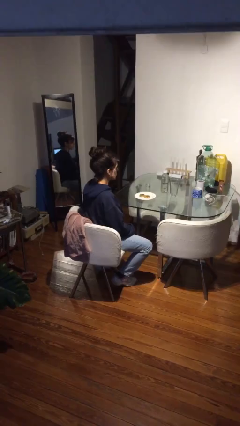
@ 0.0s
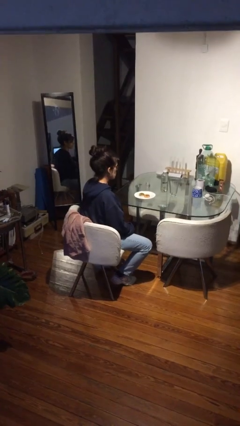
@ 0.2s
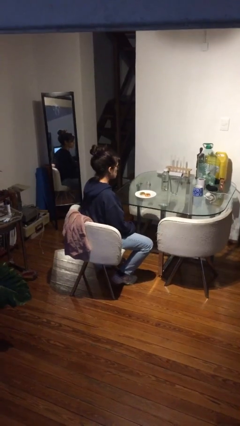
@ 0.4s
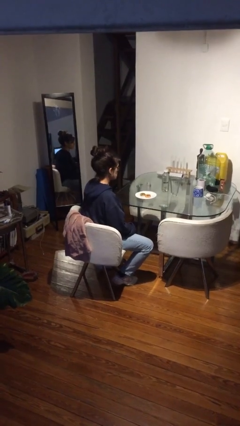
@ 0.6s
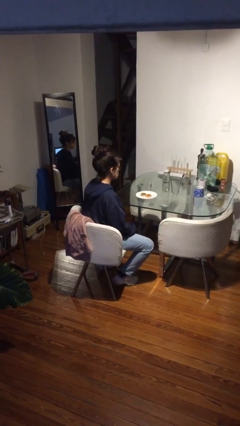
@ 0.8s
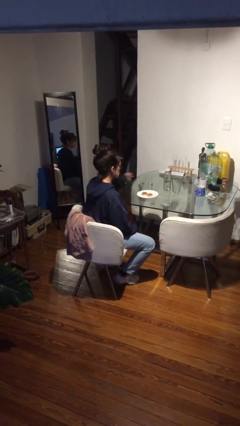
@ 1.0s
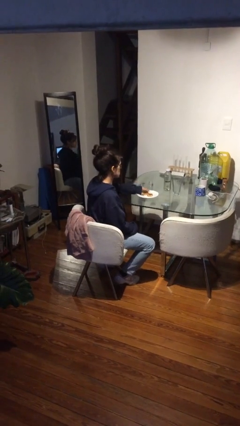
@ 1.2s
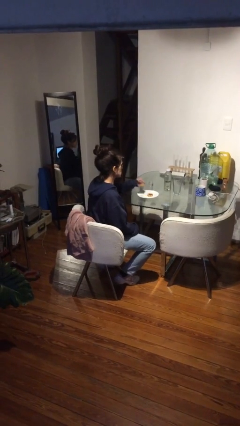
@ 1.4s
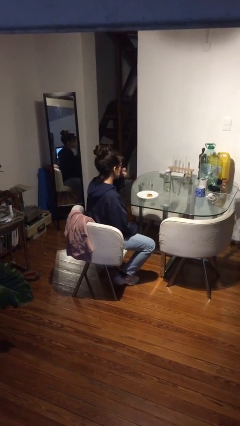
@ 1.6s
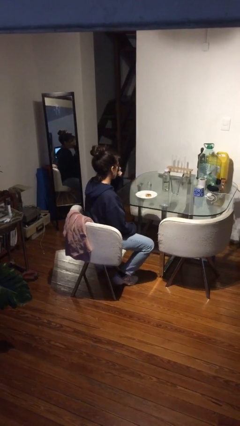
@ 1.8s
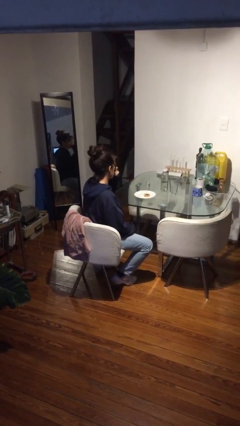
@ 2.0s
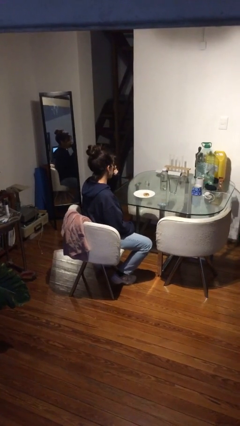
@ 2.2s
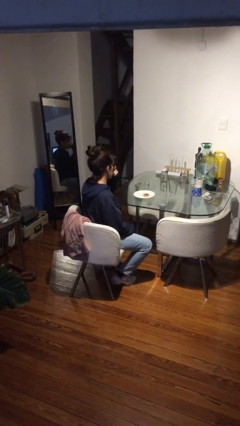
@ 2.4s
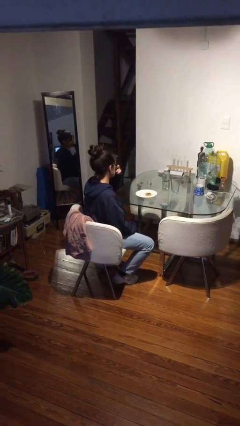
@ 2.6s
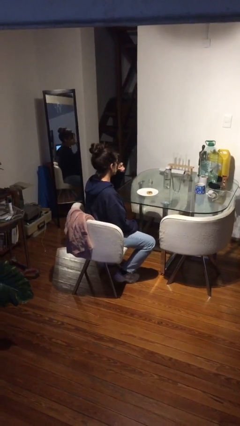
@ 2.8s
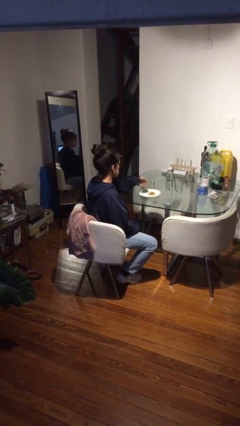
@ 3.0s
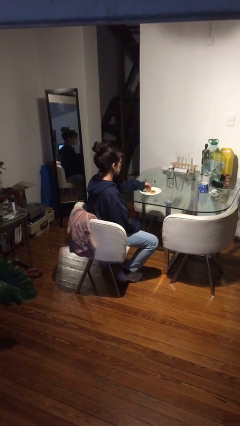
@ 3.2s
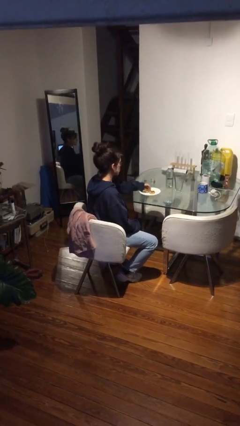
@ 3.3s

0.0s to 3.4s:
person eats with hands

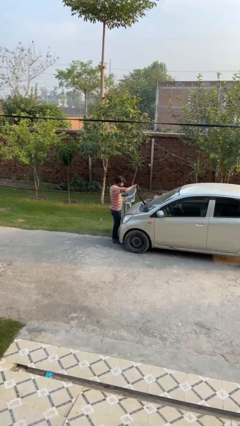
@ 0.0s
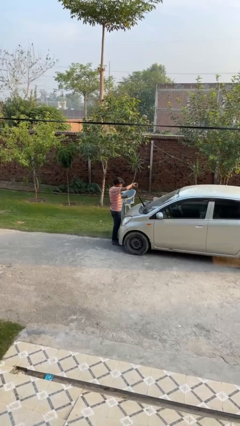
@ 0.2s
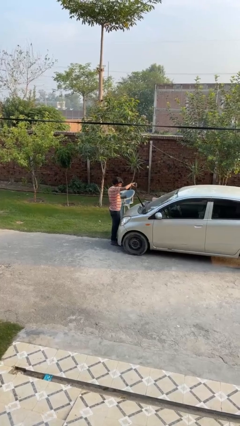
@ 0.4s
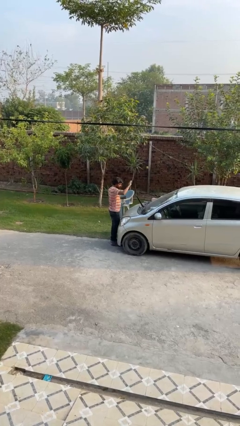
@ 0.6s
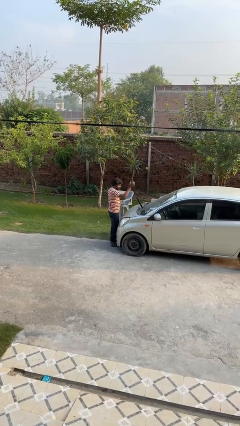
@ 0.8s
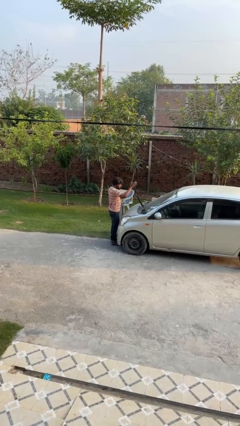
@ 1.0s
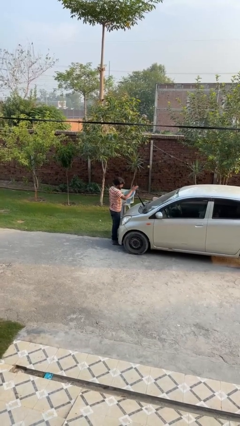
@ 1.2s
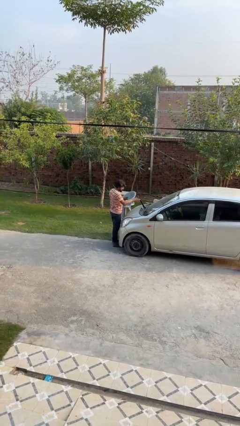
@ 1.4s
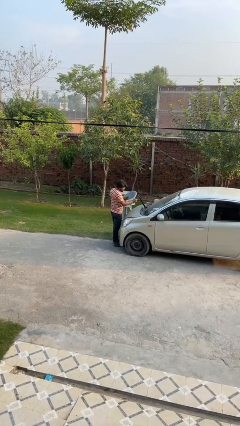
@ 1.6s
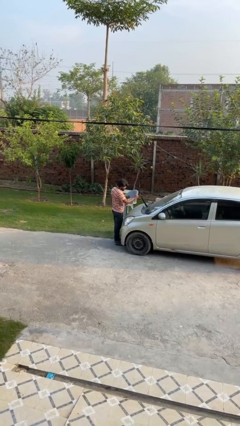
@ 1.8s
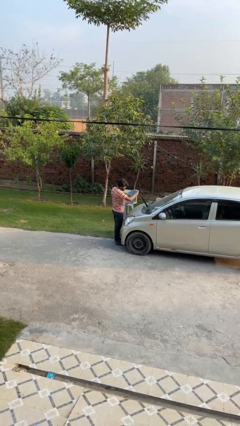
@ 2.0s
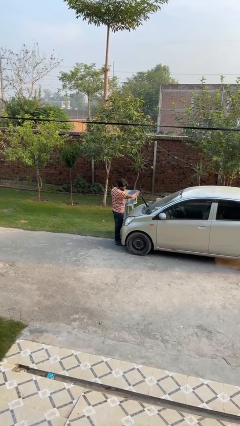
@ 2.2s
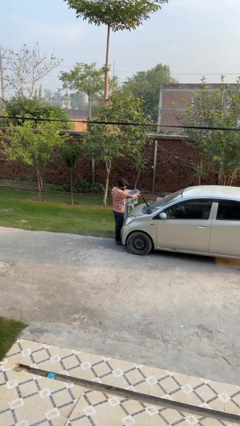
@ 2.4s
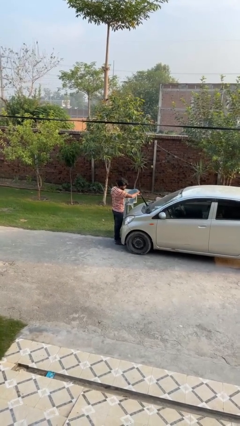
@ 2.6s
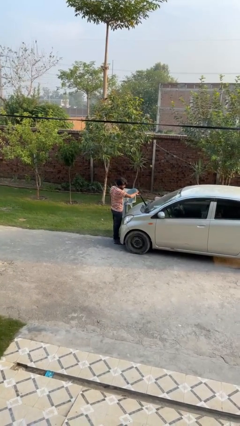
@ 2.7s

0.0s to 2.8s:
person flips up car wipers

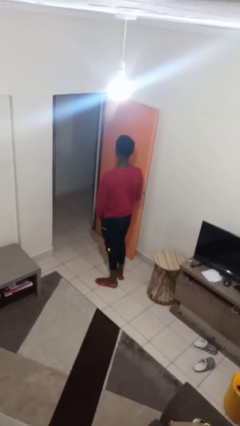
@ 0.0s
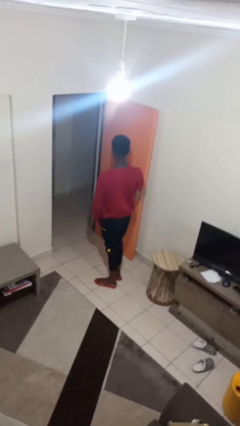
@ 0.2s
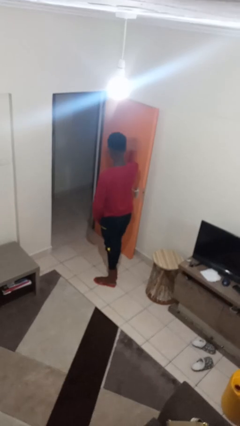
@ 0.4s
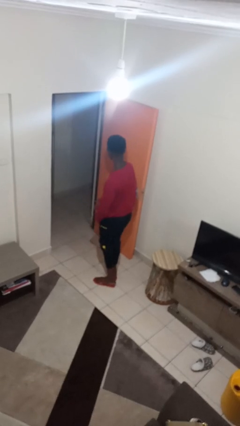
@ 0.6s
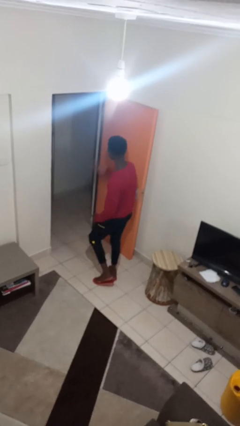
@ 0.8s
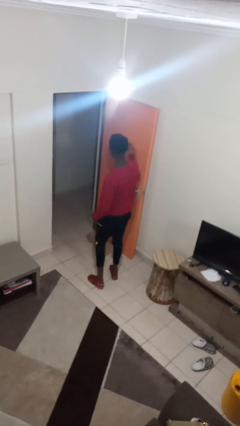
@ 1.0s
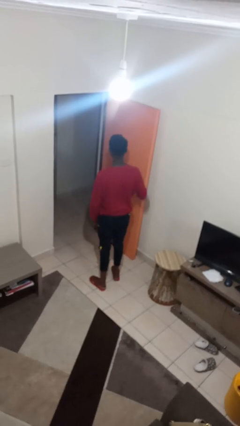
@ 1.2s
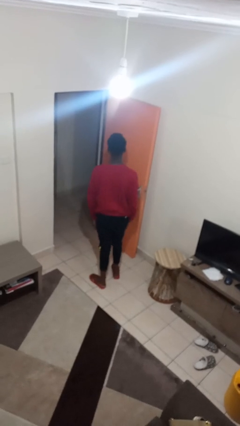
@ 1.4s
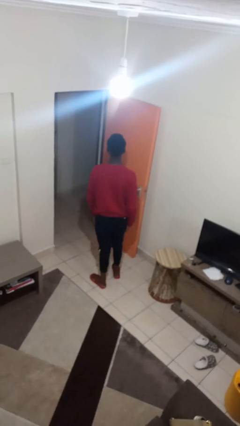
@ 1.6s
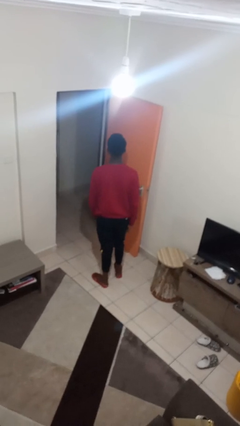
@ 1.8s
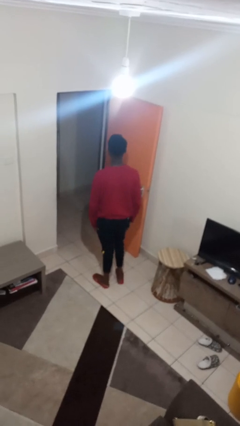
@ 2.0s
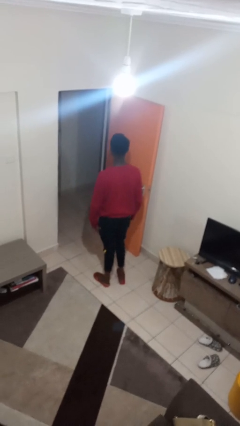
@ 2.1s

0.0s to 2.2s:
person karate chop

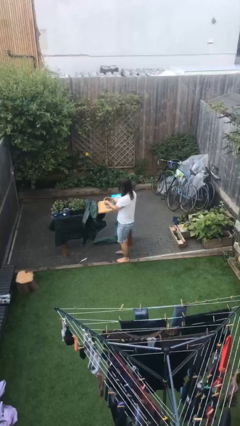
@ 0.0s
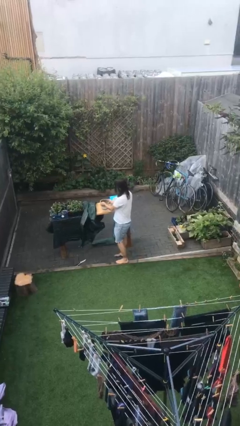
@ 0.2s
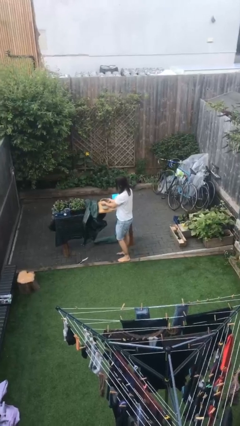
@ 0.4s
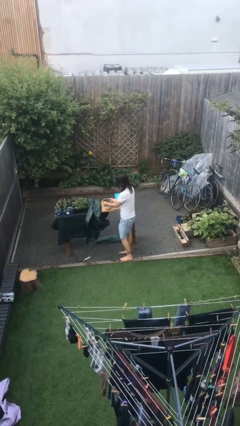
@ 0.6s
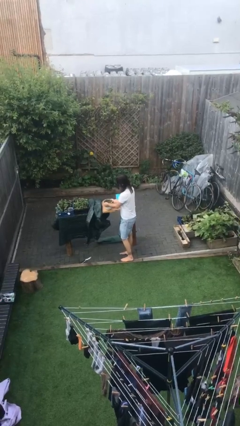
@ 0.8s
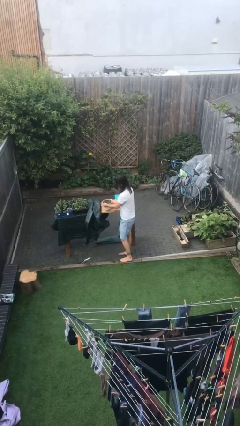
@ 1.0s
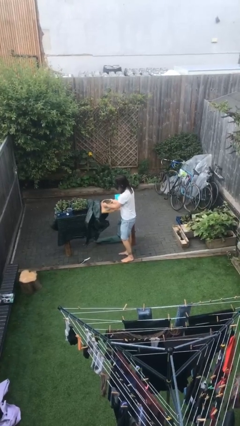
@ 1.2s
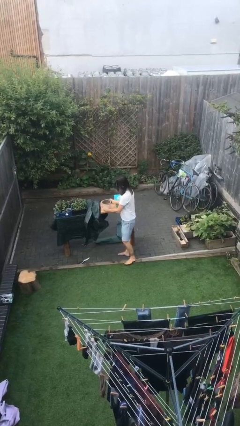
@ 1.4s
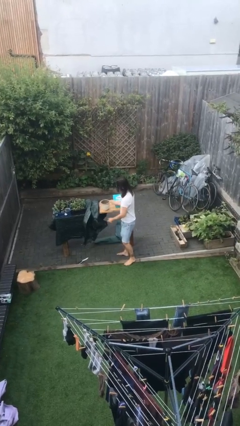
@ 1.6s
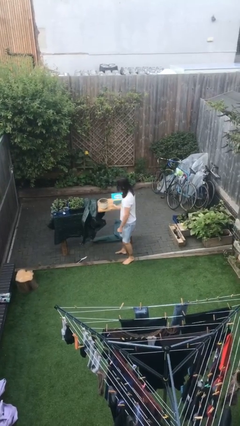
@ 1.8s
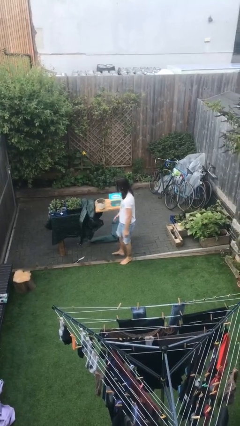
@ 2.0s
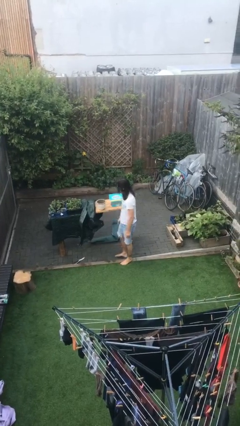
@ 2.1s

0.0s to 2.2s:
person puts down object on table

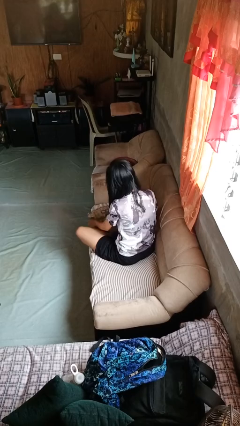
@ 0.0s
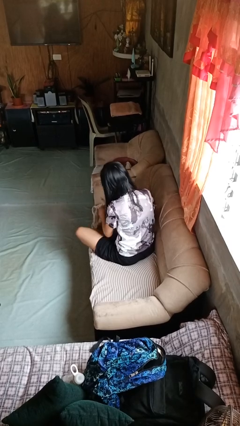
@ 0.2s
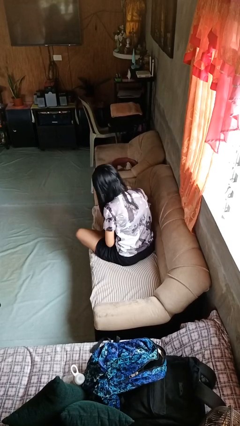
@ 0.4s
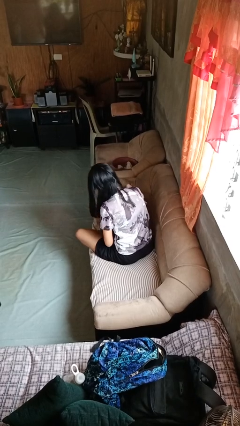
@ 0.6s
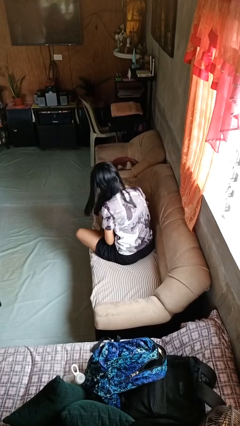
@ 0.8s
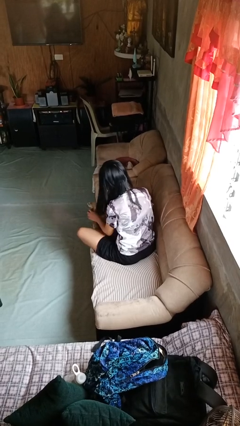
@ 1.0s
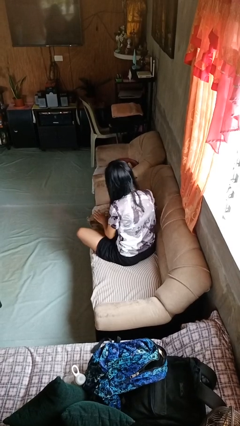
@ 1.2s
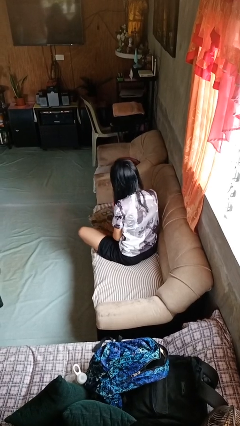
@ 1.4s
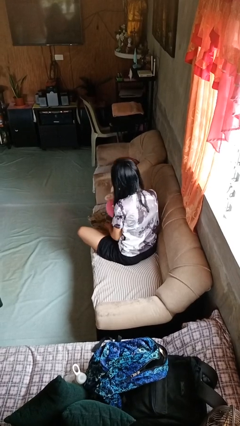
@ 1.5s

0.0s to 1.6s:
person searches in couch

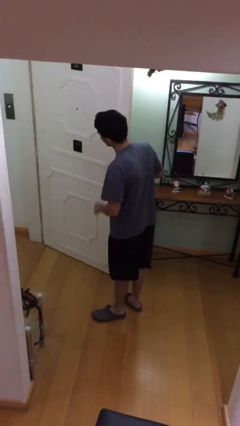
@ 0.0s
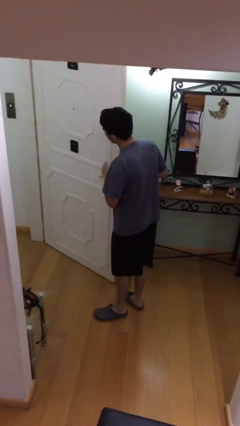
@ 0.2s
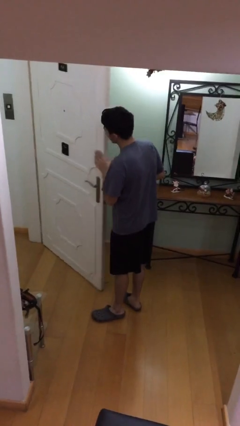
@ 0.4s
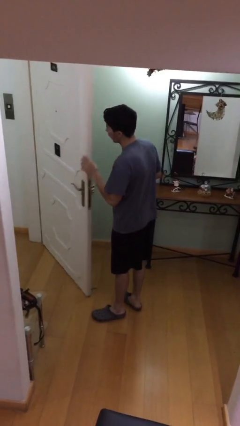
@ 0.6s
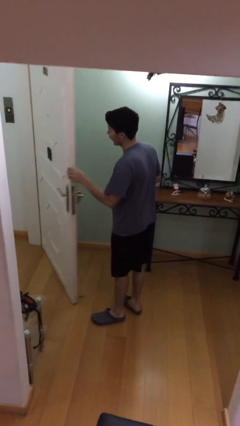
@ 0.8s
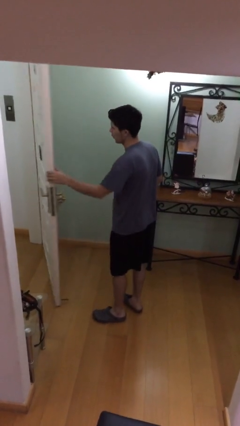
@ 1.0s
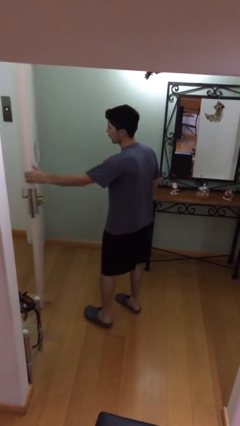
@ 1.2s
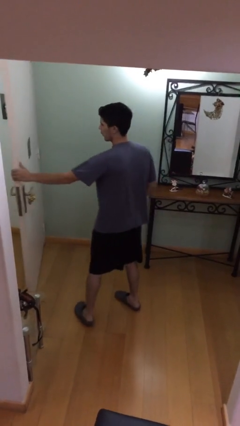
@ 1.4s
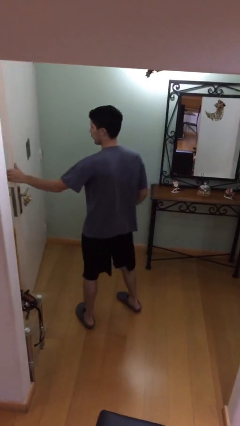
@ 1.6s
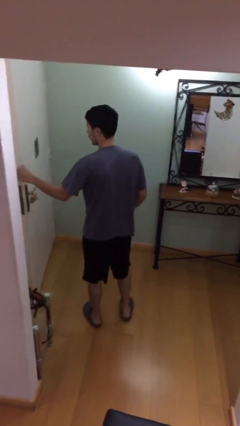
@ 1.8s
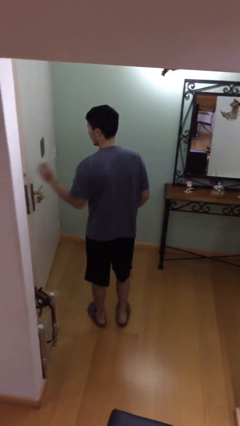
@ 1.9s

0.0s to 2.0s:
person closes facility door

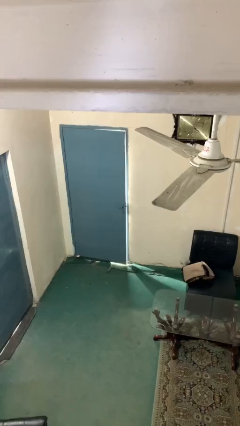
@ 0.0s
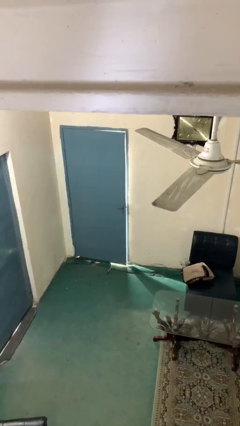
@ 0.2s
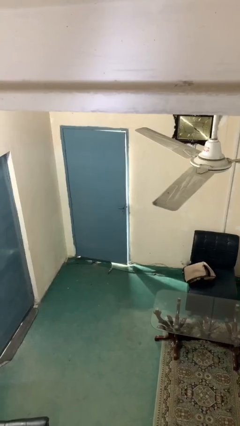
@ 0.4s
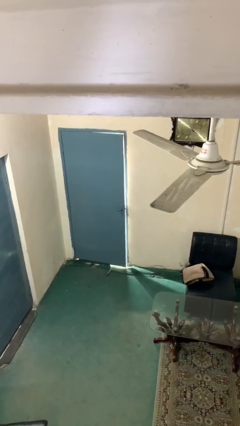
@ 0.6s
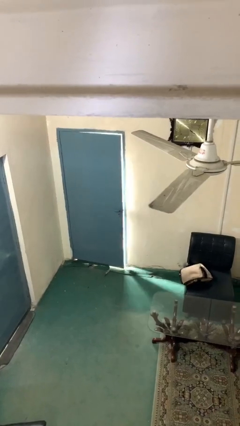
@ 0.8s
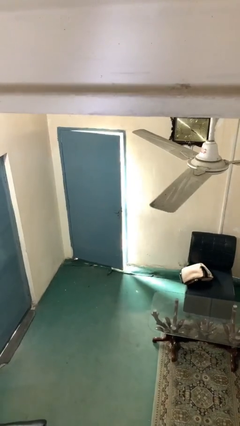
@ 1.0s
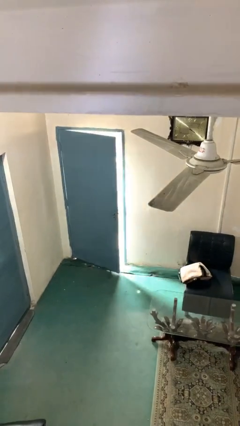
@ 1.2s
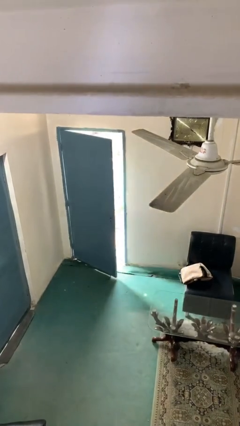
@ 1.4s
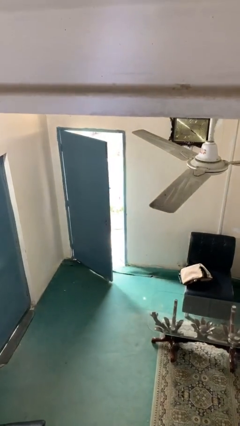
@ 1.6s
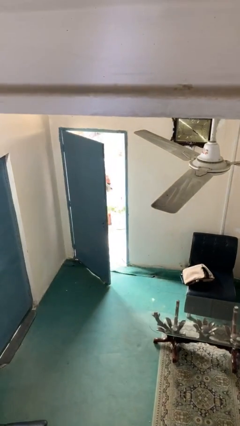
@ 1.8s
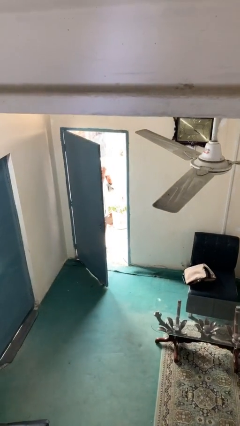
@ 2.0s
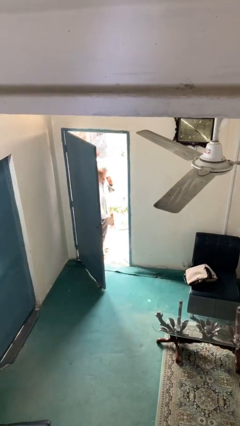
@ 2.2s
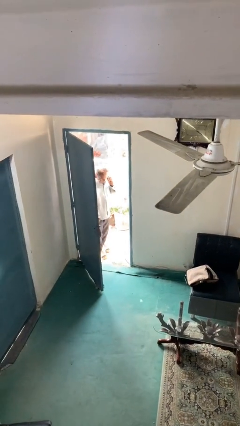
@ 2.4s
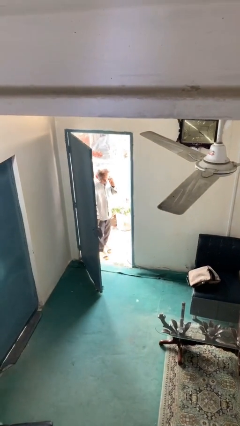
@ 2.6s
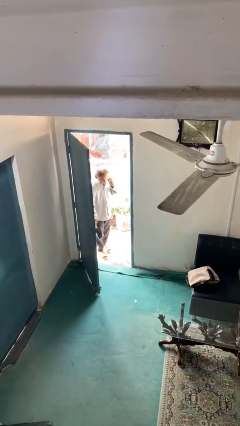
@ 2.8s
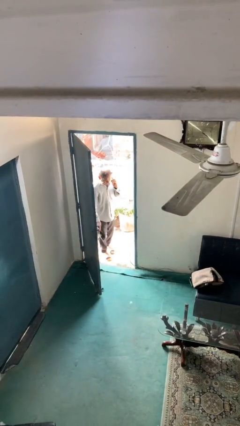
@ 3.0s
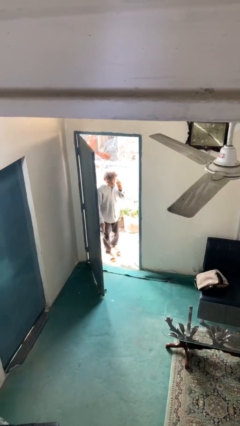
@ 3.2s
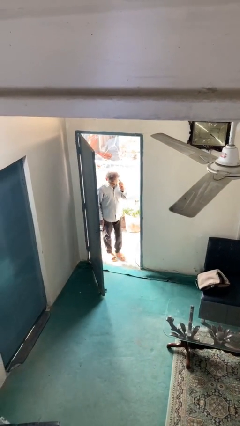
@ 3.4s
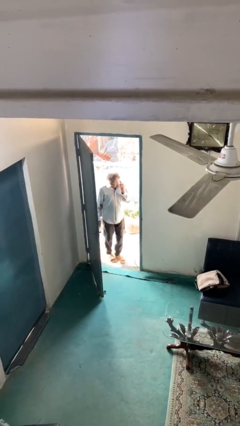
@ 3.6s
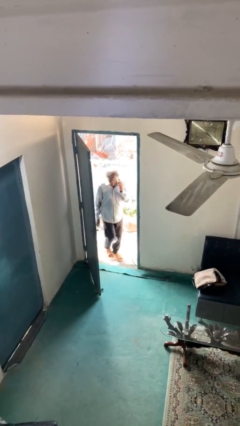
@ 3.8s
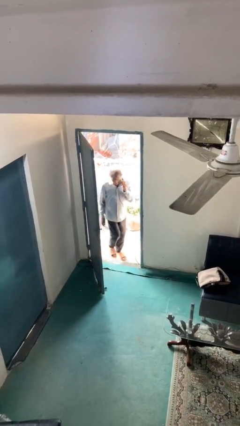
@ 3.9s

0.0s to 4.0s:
person opens facility door
